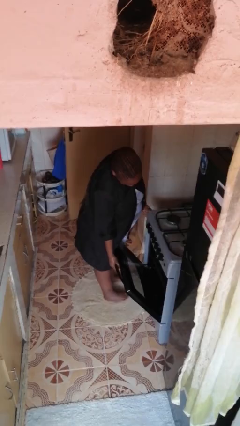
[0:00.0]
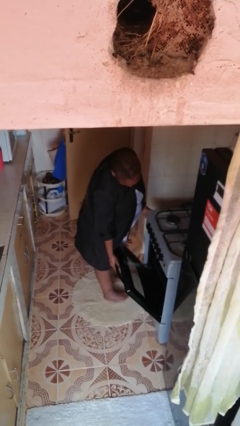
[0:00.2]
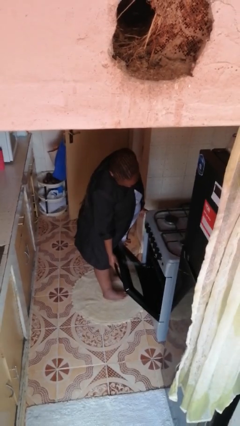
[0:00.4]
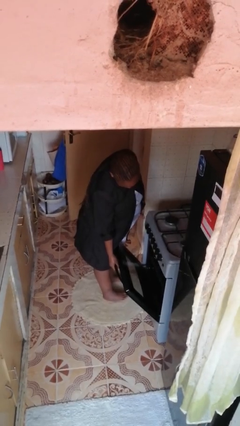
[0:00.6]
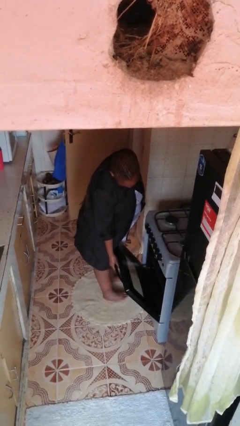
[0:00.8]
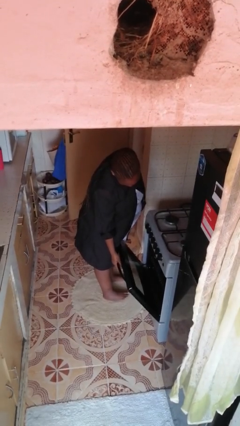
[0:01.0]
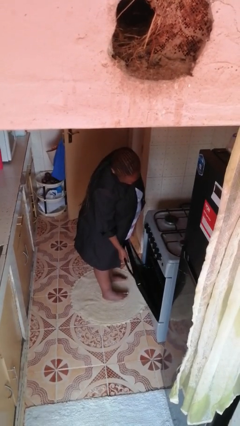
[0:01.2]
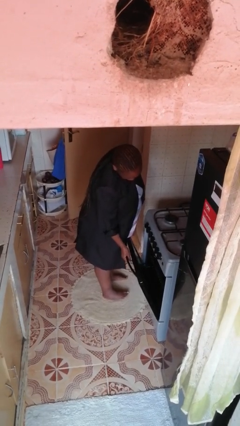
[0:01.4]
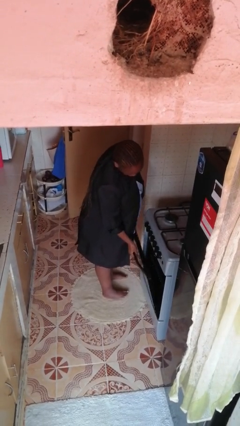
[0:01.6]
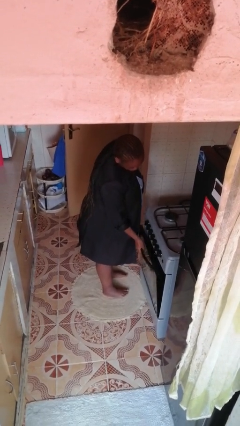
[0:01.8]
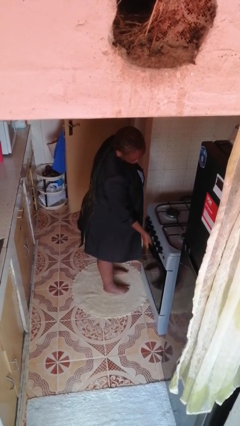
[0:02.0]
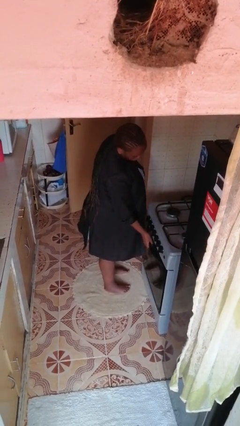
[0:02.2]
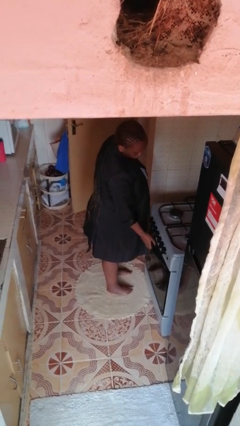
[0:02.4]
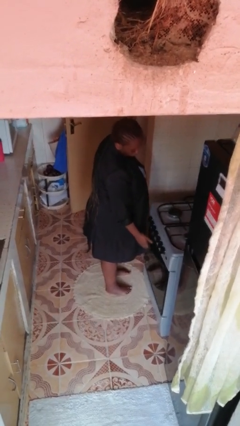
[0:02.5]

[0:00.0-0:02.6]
person closes oven door

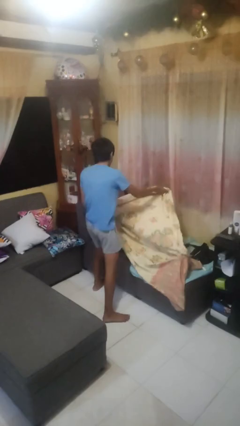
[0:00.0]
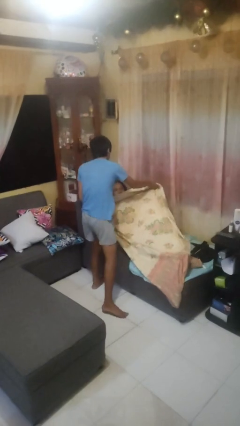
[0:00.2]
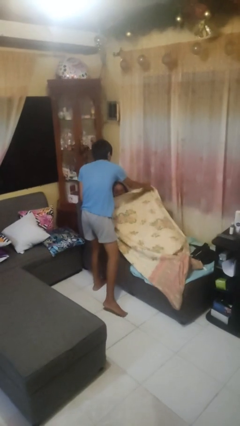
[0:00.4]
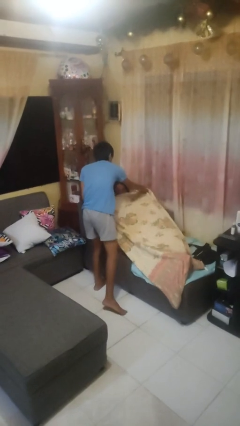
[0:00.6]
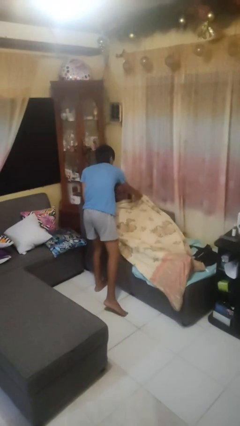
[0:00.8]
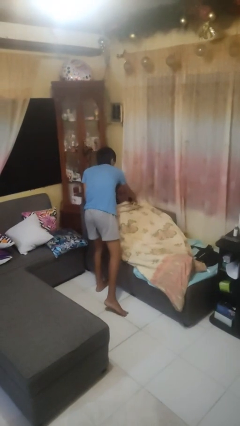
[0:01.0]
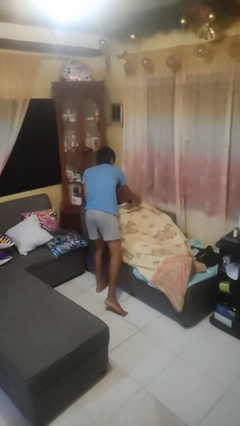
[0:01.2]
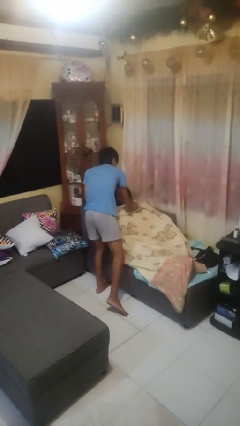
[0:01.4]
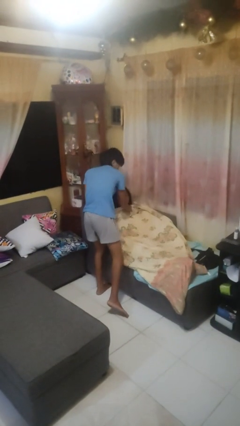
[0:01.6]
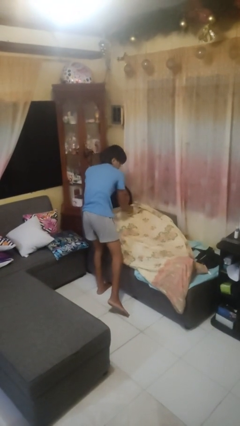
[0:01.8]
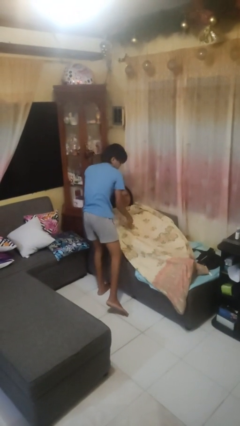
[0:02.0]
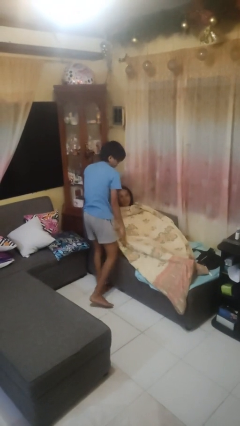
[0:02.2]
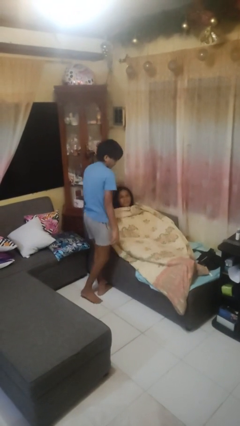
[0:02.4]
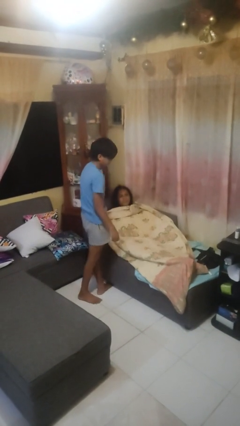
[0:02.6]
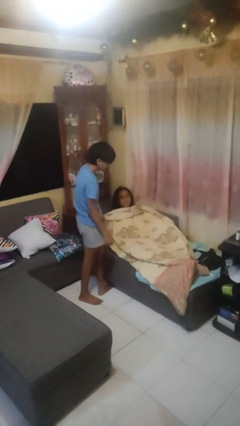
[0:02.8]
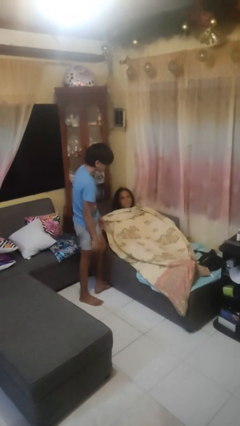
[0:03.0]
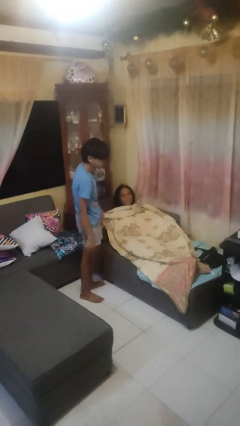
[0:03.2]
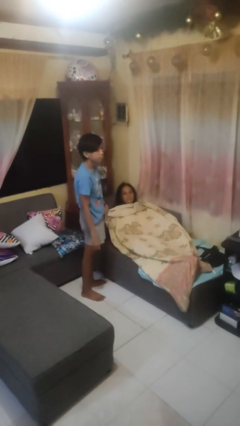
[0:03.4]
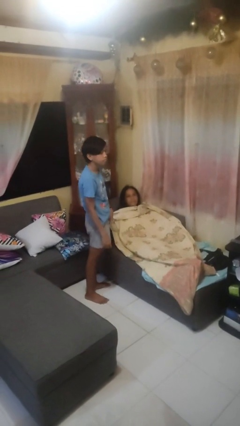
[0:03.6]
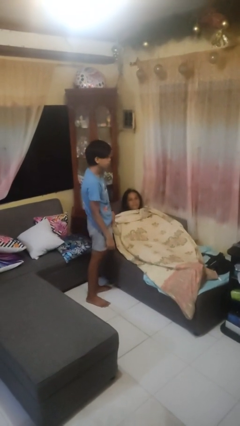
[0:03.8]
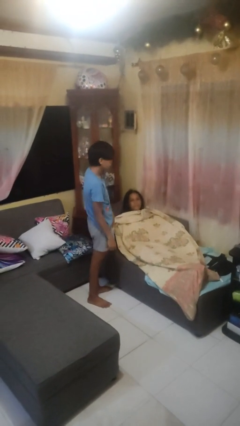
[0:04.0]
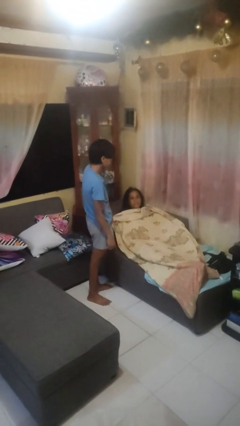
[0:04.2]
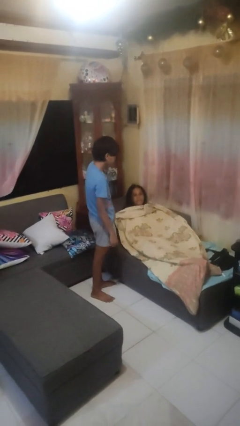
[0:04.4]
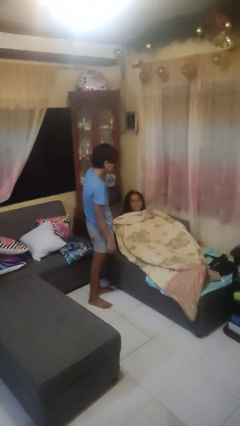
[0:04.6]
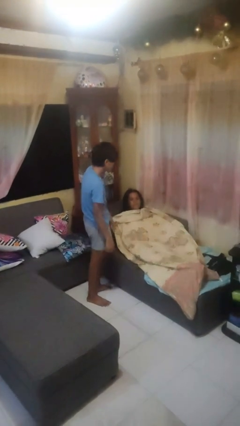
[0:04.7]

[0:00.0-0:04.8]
person covers friend with blanket

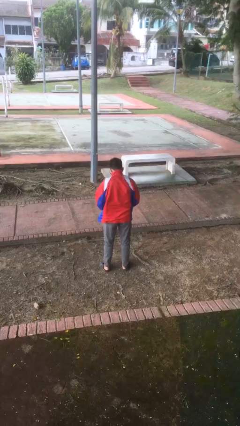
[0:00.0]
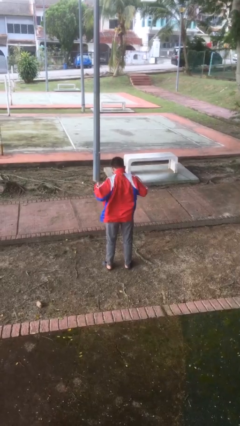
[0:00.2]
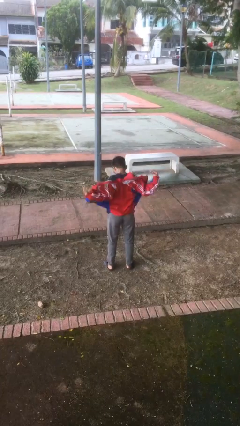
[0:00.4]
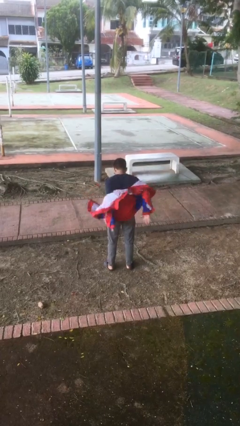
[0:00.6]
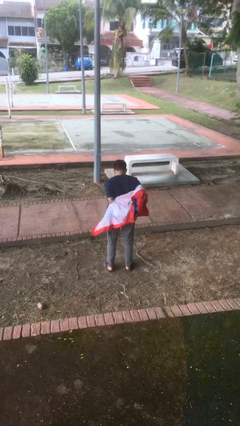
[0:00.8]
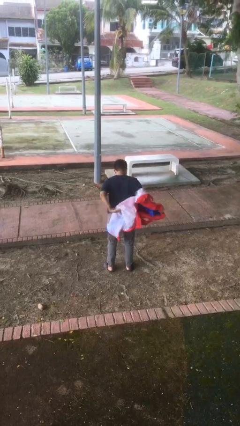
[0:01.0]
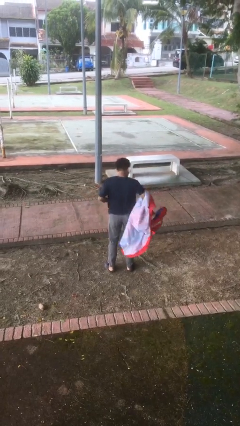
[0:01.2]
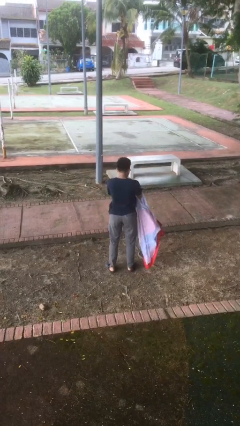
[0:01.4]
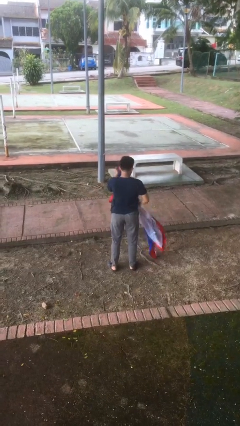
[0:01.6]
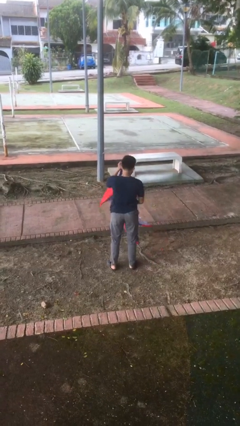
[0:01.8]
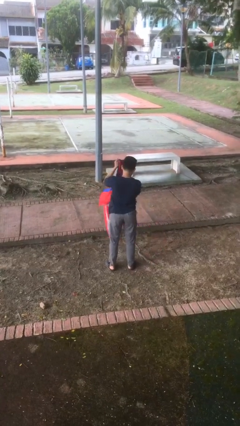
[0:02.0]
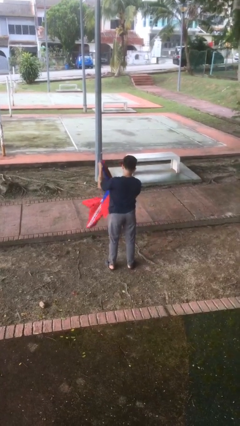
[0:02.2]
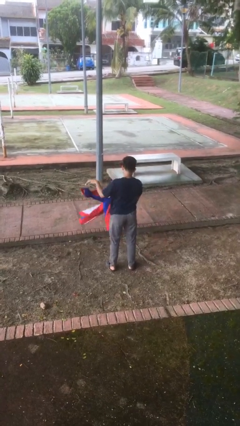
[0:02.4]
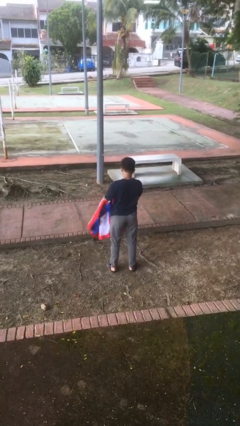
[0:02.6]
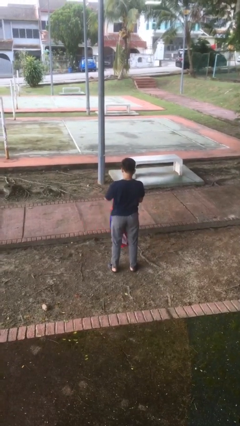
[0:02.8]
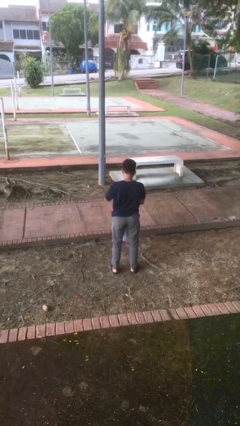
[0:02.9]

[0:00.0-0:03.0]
person takes off jacket

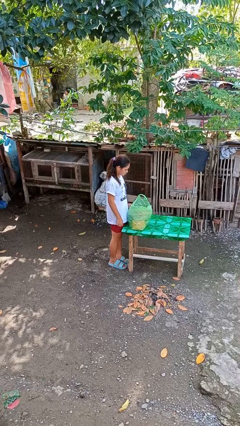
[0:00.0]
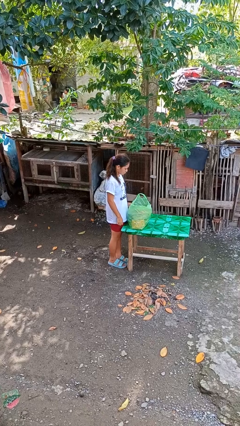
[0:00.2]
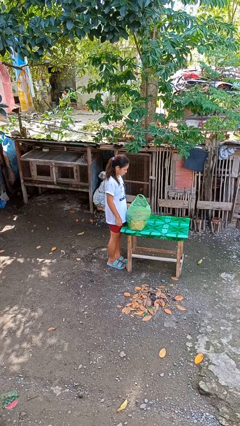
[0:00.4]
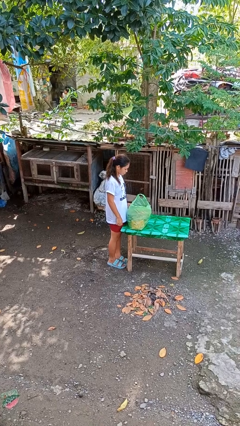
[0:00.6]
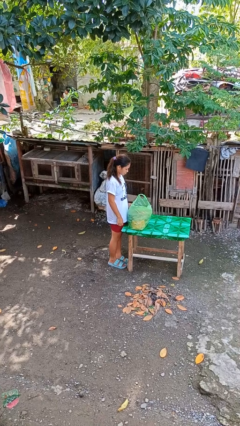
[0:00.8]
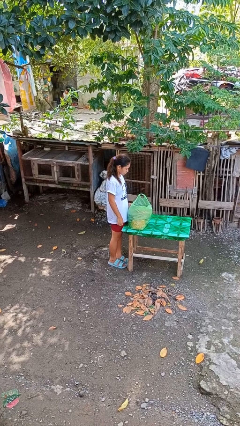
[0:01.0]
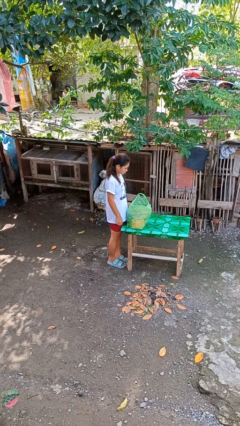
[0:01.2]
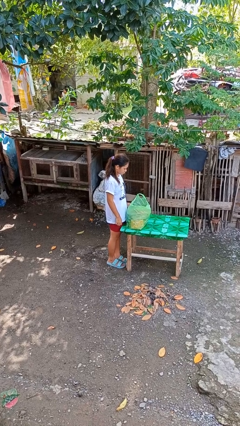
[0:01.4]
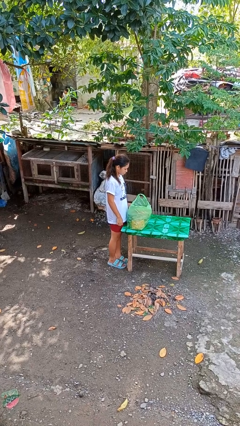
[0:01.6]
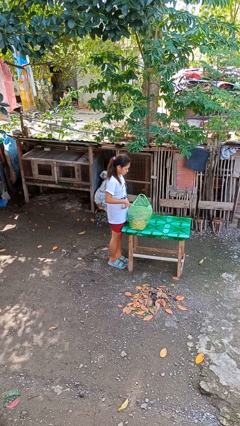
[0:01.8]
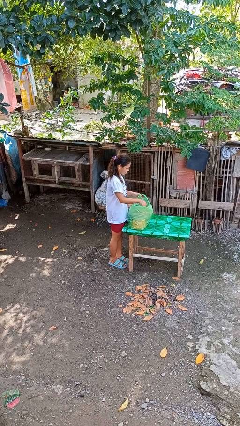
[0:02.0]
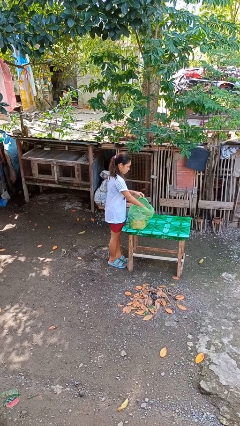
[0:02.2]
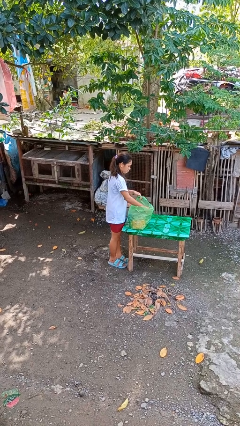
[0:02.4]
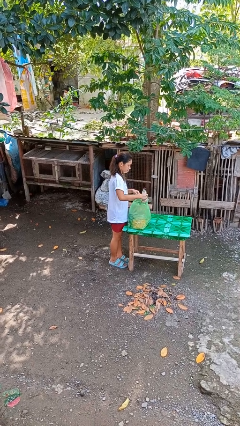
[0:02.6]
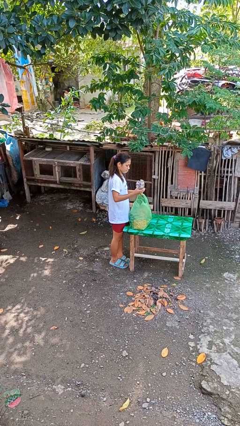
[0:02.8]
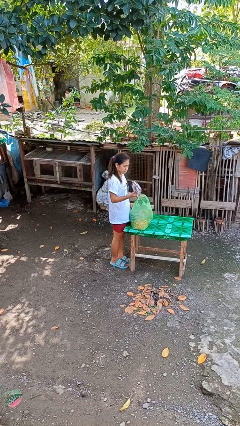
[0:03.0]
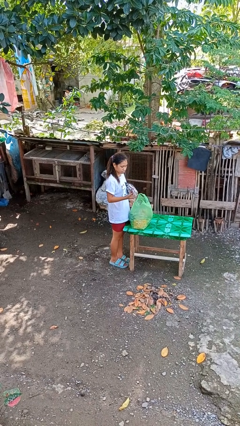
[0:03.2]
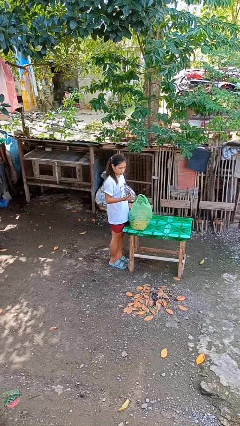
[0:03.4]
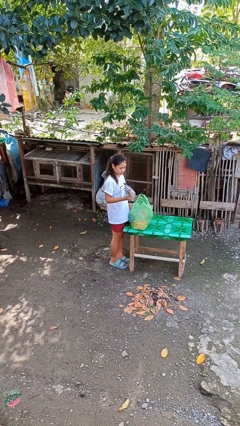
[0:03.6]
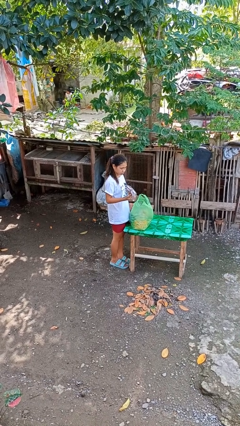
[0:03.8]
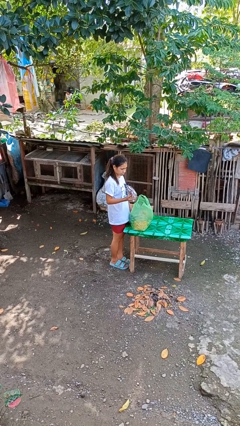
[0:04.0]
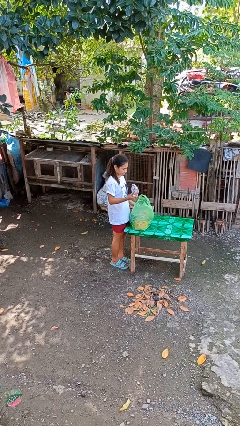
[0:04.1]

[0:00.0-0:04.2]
person takes object from bag

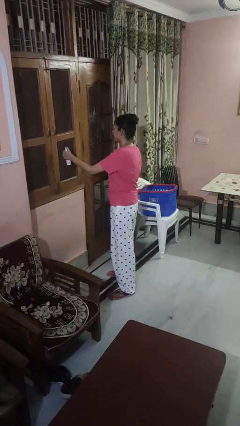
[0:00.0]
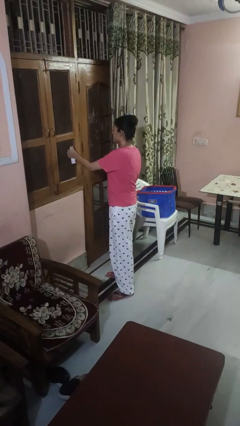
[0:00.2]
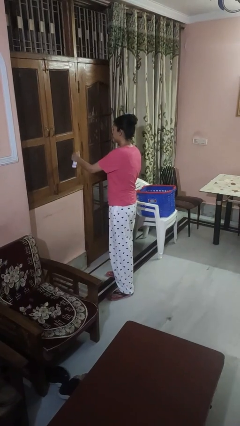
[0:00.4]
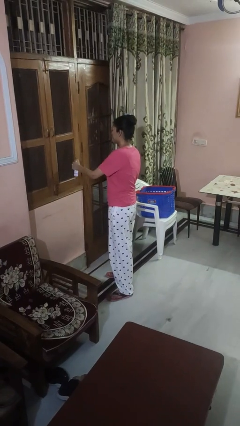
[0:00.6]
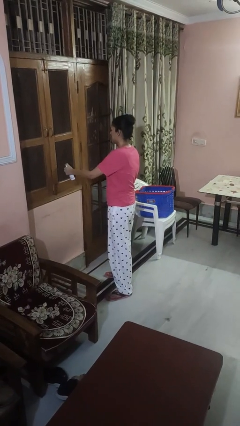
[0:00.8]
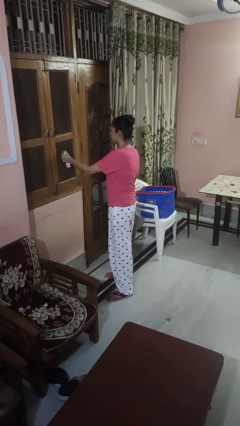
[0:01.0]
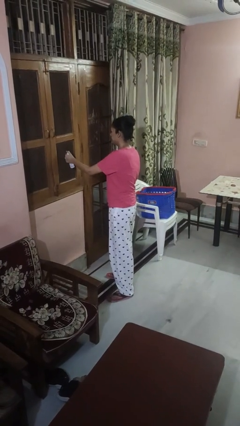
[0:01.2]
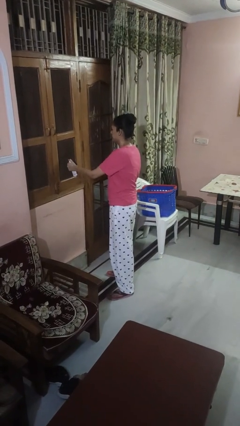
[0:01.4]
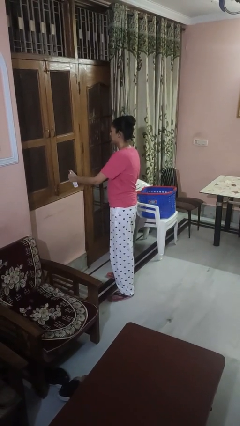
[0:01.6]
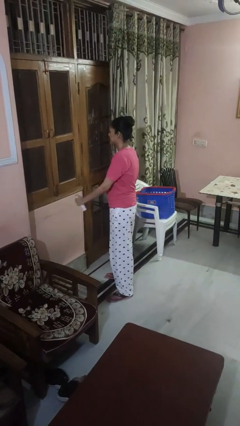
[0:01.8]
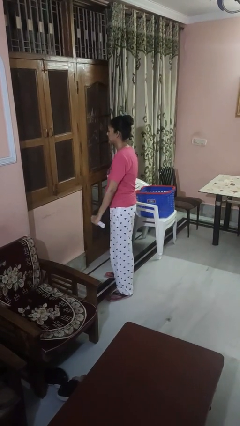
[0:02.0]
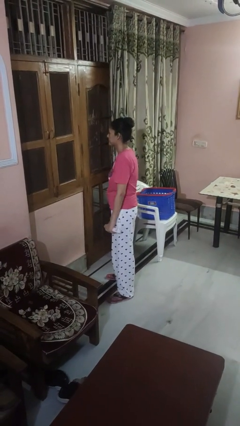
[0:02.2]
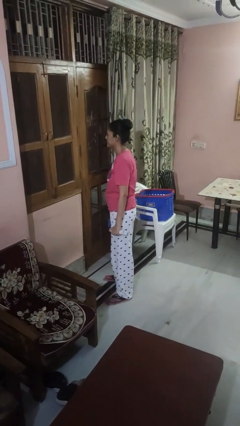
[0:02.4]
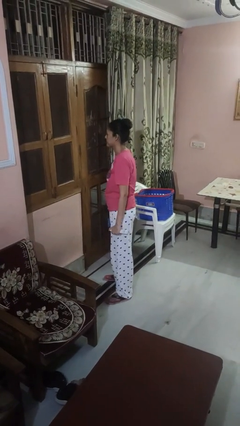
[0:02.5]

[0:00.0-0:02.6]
person sprays from bottle
